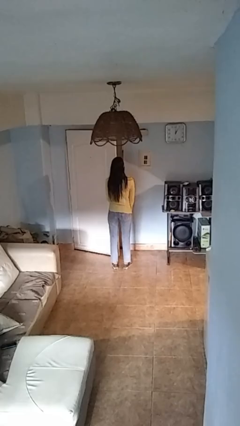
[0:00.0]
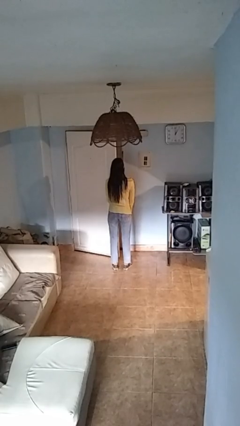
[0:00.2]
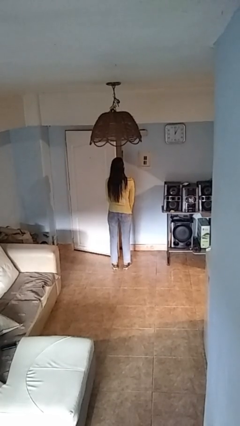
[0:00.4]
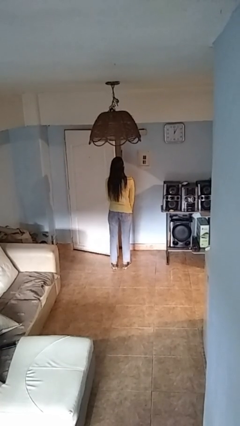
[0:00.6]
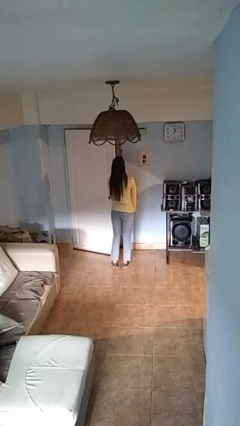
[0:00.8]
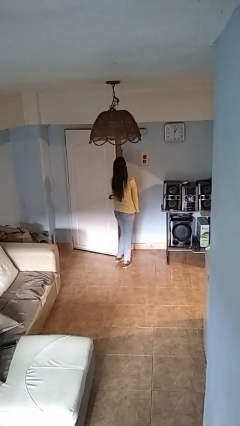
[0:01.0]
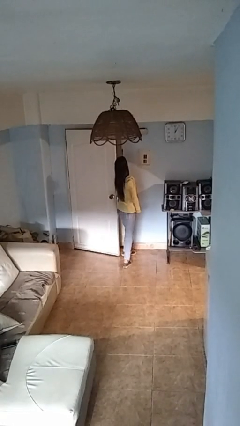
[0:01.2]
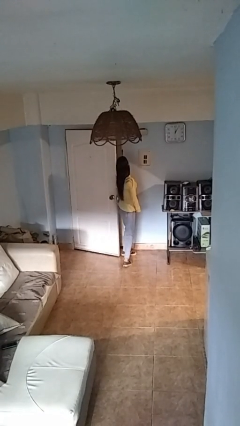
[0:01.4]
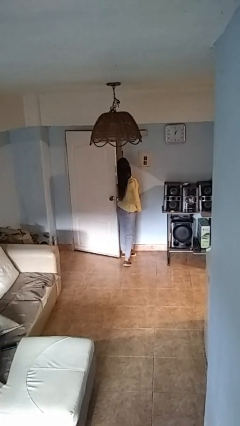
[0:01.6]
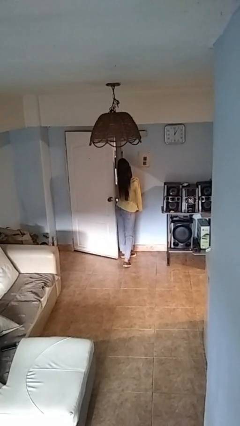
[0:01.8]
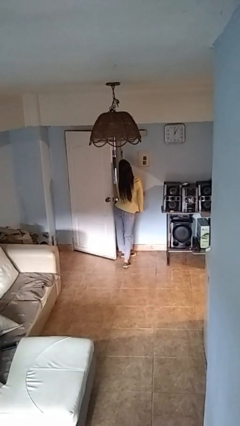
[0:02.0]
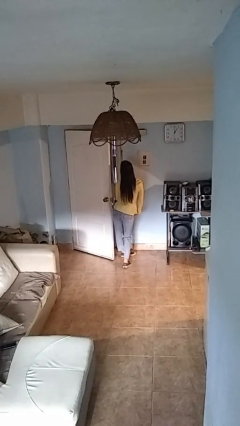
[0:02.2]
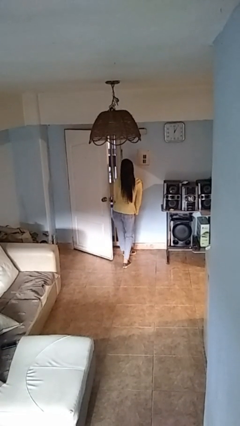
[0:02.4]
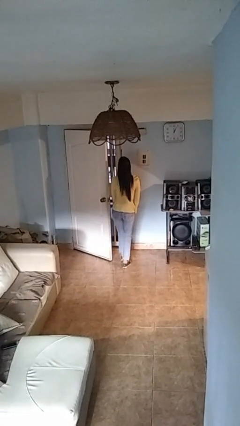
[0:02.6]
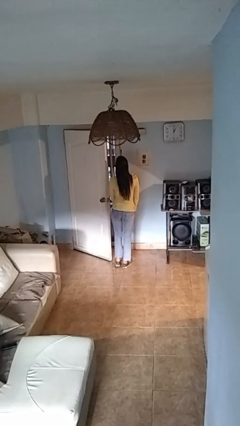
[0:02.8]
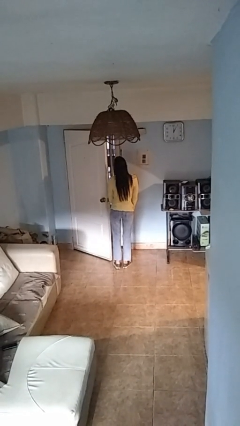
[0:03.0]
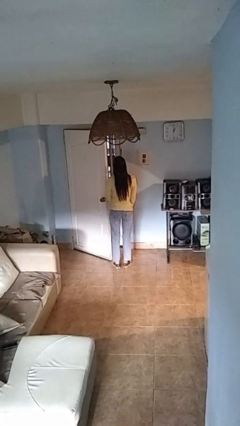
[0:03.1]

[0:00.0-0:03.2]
person opens facility door

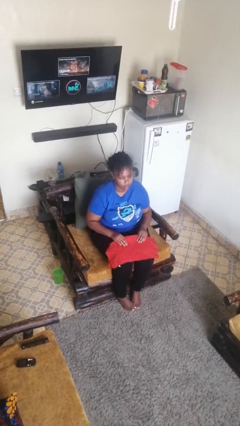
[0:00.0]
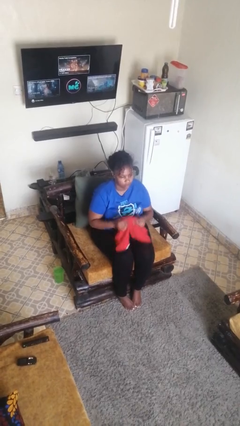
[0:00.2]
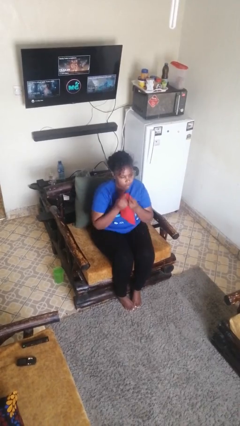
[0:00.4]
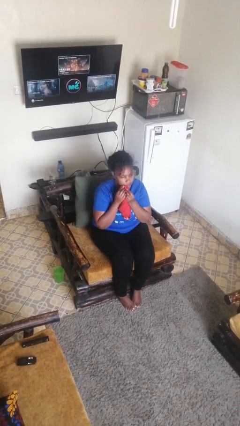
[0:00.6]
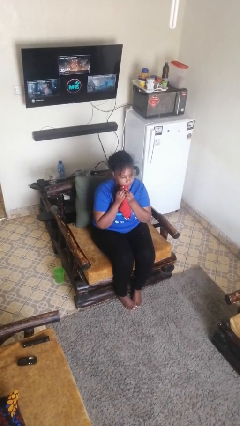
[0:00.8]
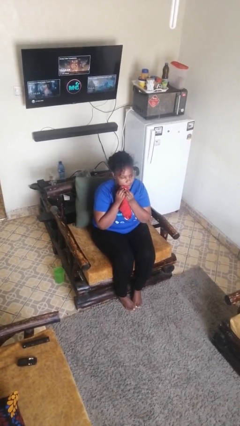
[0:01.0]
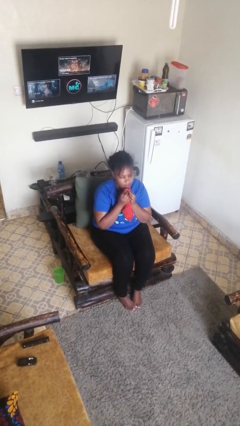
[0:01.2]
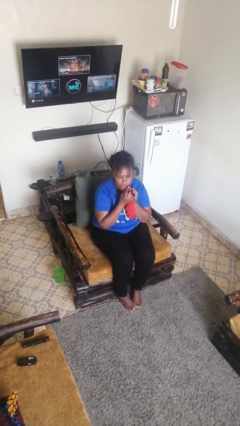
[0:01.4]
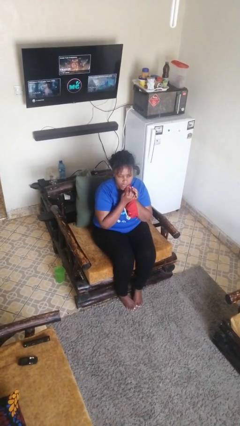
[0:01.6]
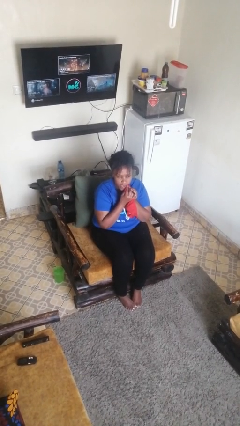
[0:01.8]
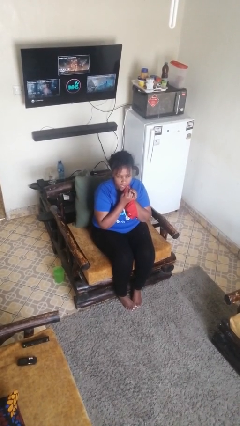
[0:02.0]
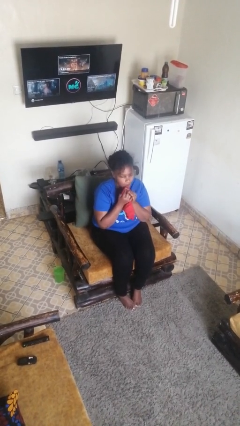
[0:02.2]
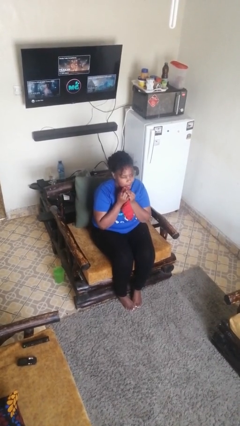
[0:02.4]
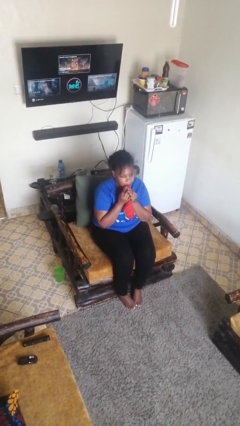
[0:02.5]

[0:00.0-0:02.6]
person wipes mouth with napkin

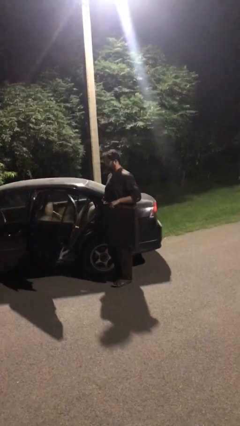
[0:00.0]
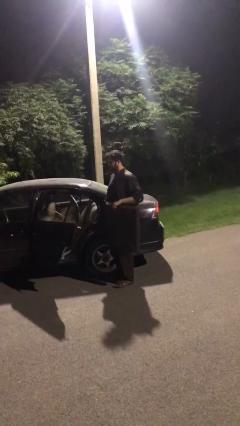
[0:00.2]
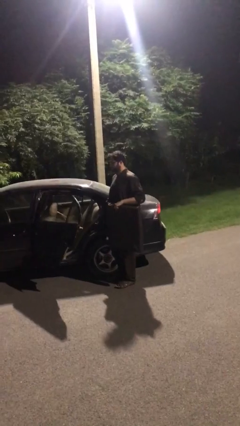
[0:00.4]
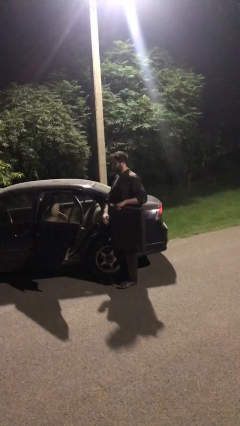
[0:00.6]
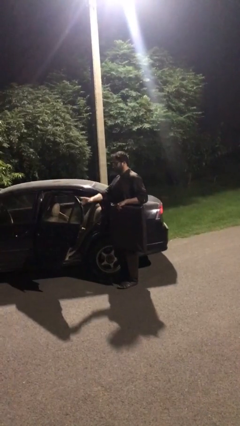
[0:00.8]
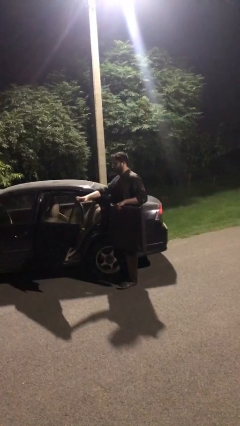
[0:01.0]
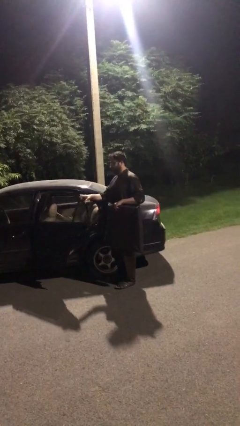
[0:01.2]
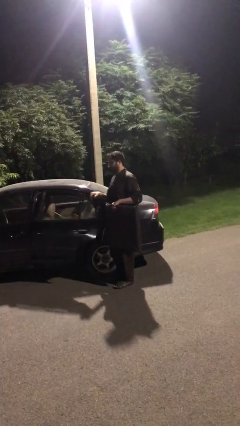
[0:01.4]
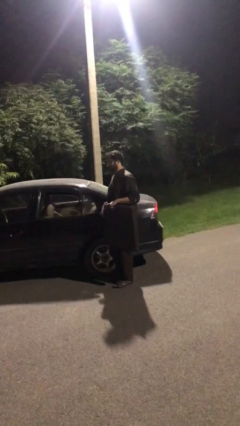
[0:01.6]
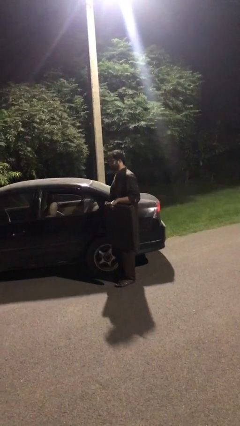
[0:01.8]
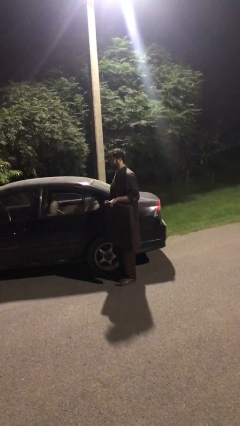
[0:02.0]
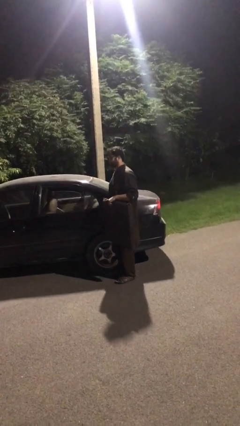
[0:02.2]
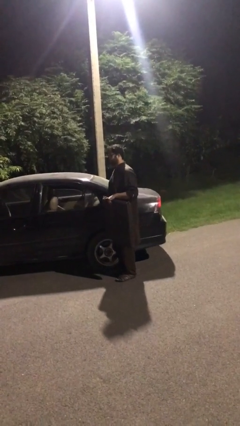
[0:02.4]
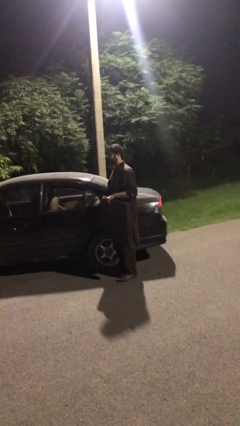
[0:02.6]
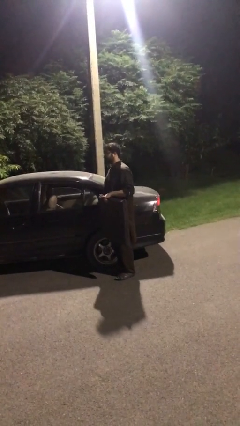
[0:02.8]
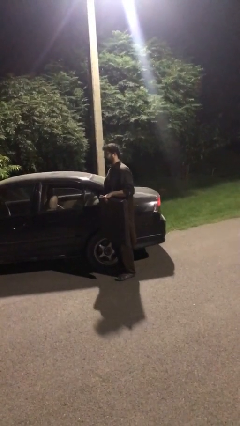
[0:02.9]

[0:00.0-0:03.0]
person closes car door

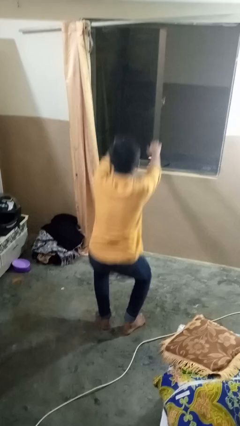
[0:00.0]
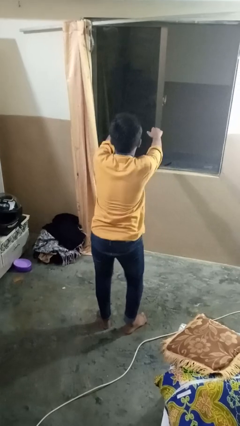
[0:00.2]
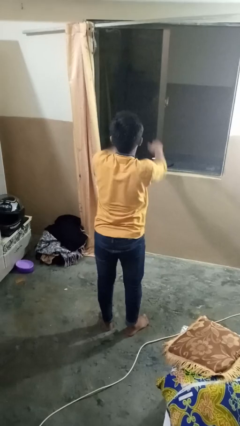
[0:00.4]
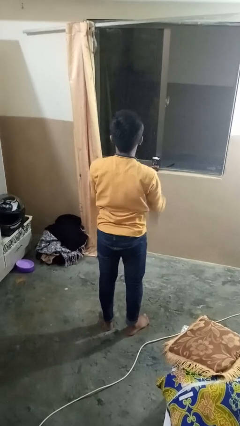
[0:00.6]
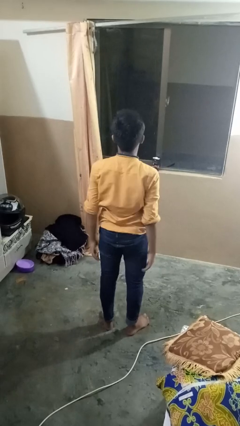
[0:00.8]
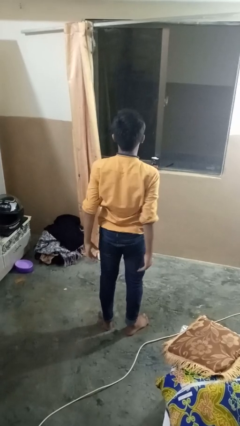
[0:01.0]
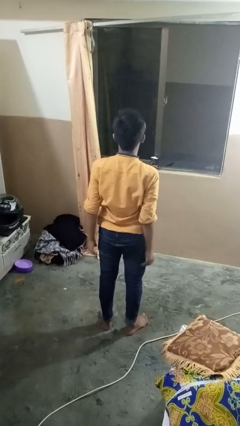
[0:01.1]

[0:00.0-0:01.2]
person stands up

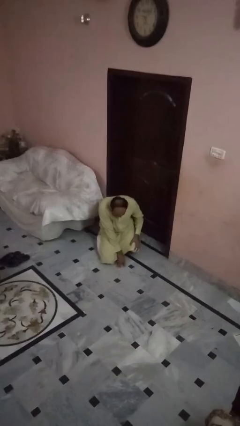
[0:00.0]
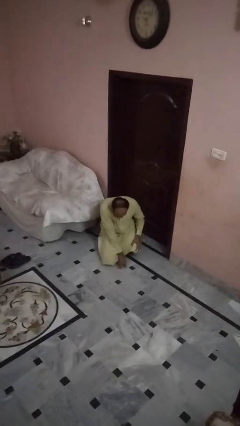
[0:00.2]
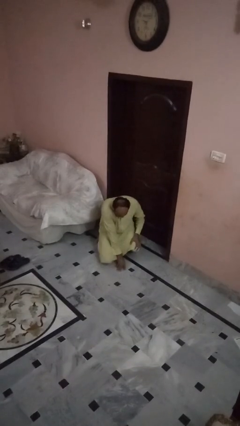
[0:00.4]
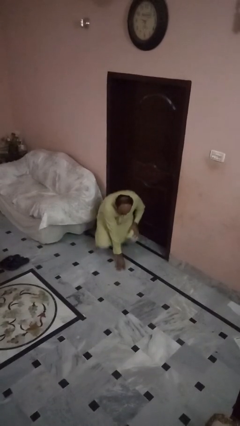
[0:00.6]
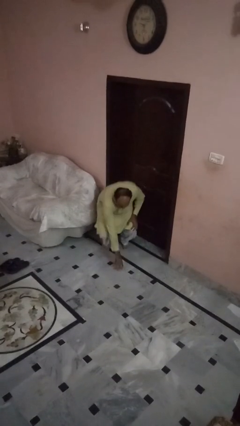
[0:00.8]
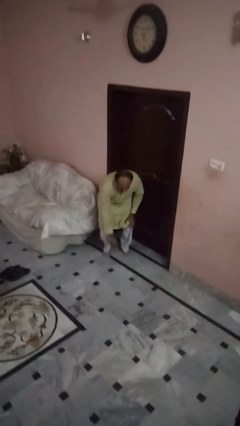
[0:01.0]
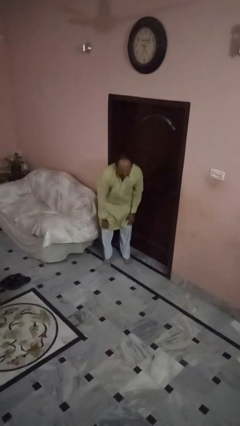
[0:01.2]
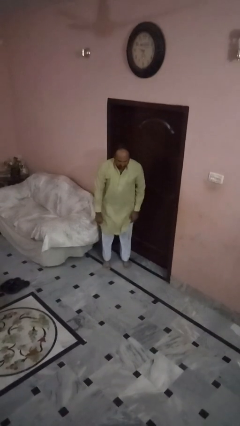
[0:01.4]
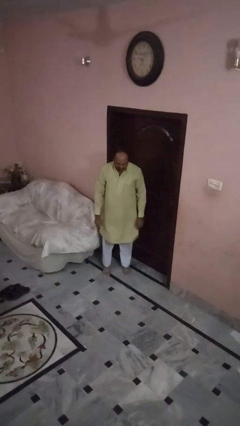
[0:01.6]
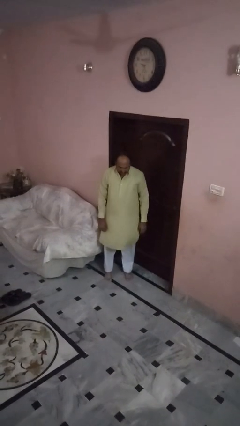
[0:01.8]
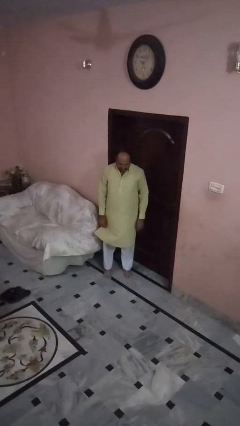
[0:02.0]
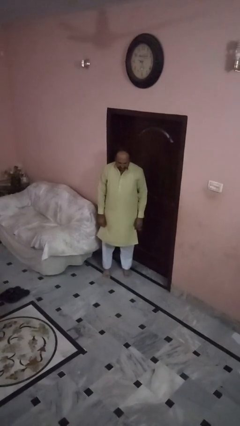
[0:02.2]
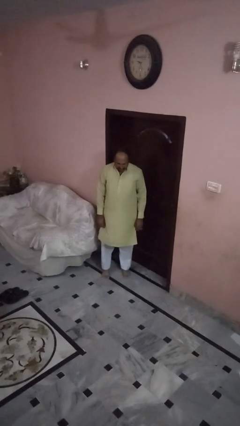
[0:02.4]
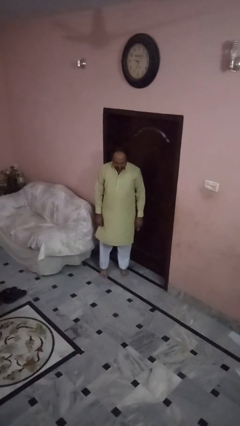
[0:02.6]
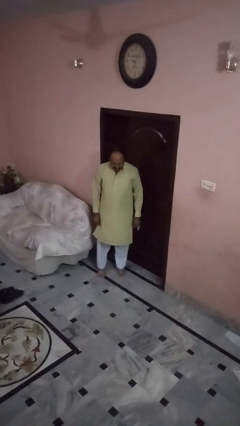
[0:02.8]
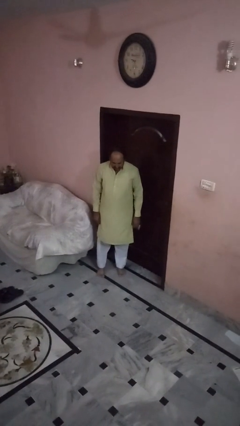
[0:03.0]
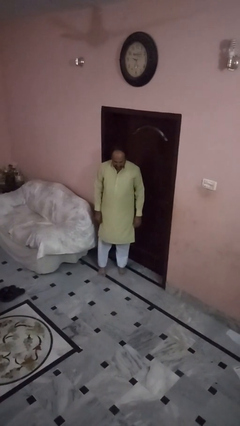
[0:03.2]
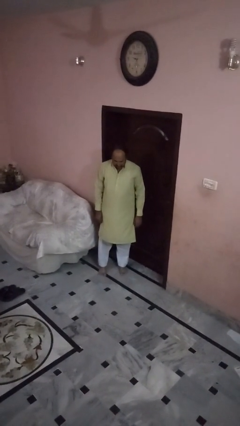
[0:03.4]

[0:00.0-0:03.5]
person stands up from floor

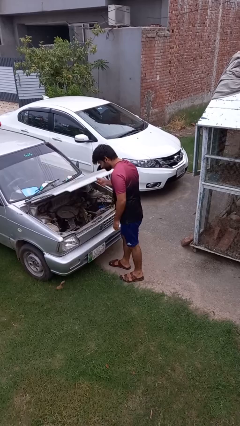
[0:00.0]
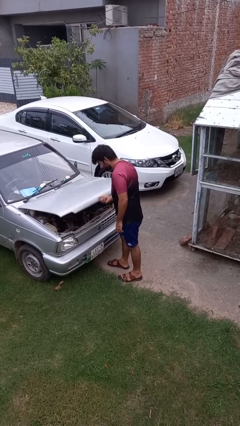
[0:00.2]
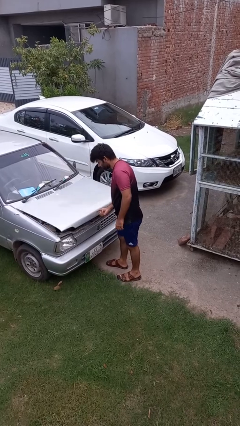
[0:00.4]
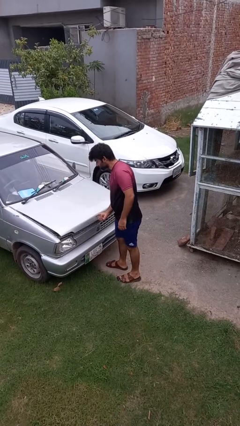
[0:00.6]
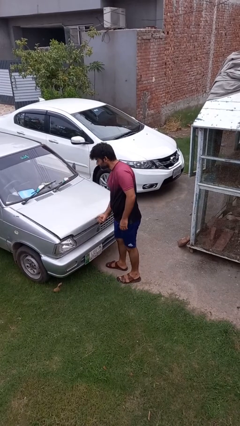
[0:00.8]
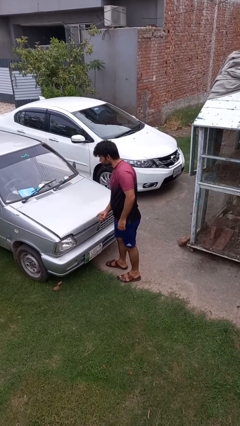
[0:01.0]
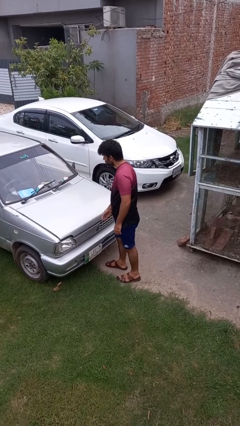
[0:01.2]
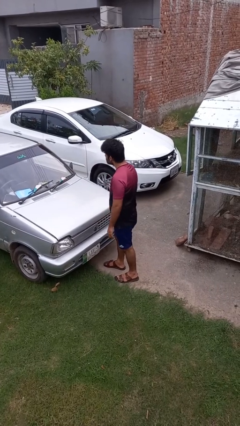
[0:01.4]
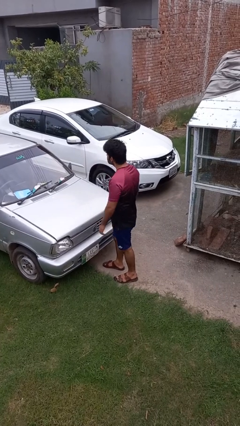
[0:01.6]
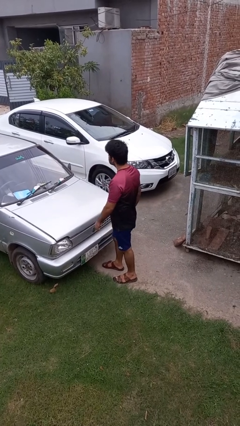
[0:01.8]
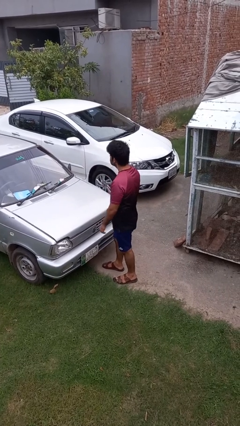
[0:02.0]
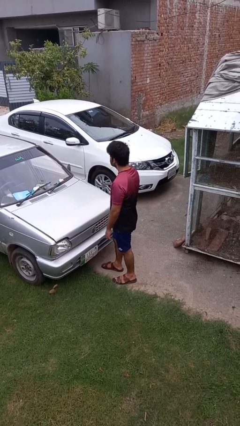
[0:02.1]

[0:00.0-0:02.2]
person closes car hood

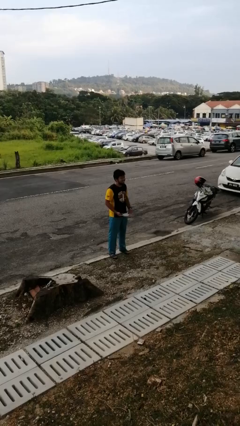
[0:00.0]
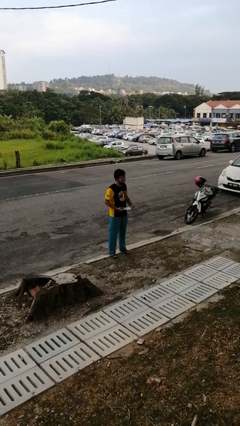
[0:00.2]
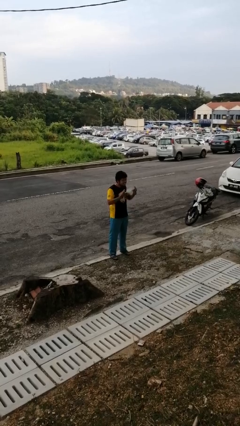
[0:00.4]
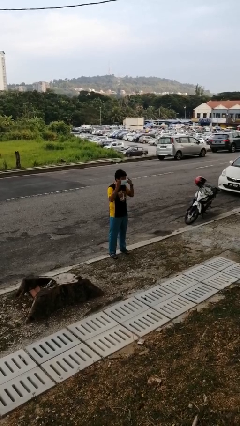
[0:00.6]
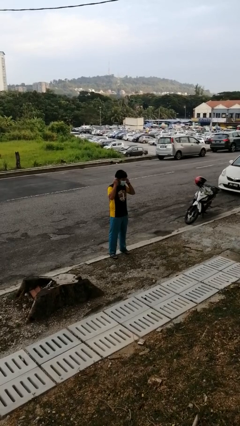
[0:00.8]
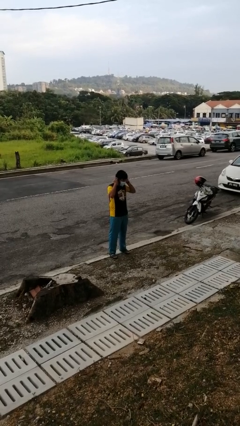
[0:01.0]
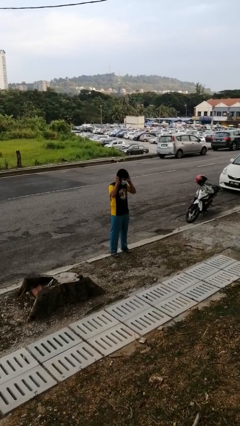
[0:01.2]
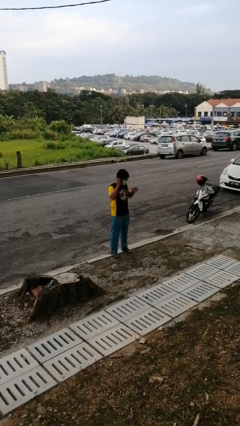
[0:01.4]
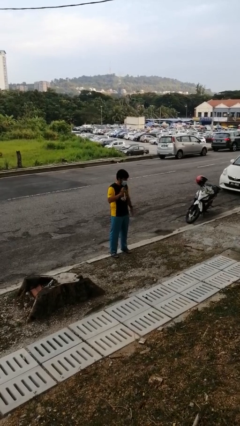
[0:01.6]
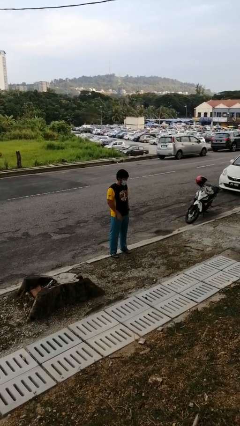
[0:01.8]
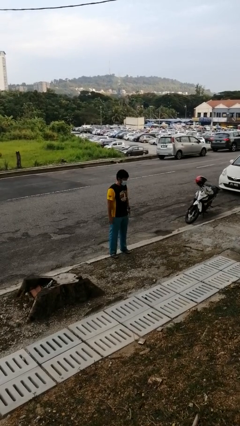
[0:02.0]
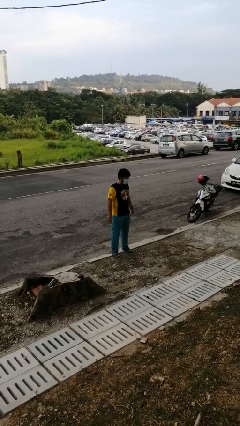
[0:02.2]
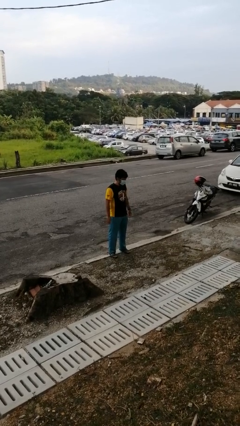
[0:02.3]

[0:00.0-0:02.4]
person puts on facemask
